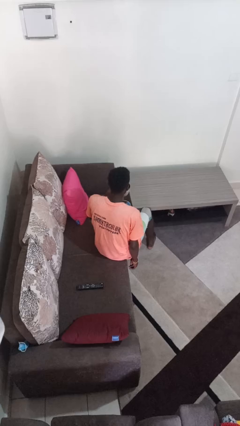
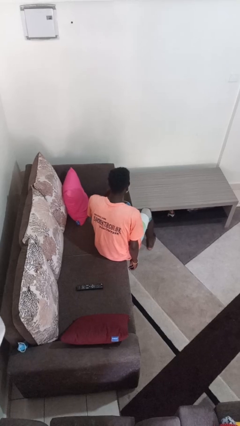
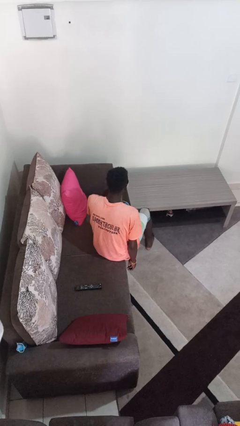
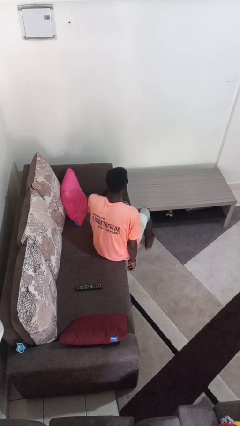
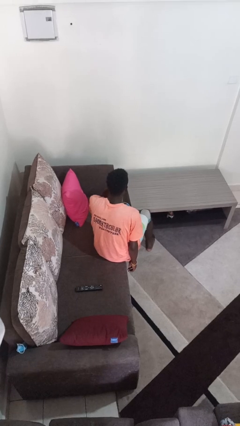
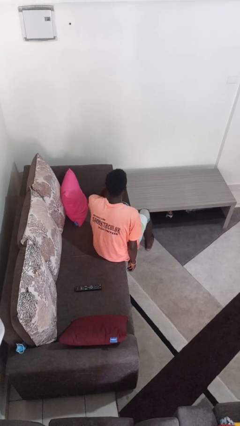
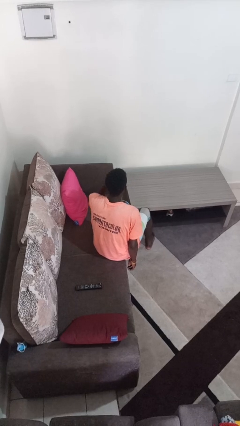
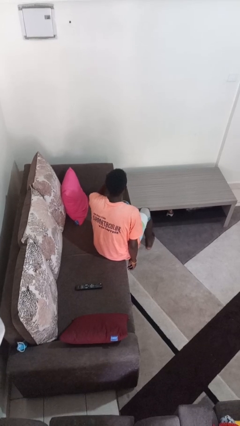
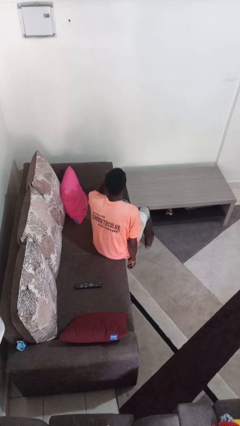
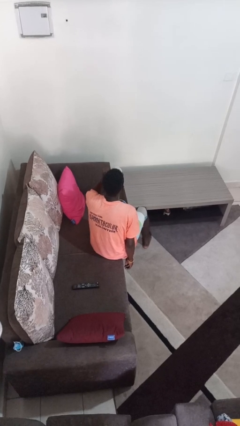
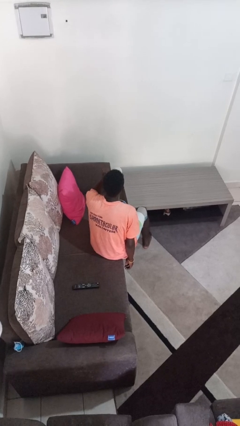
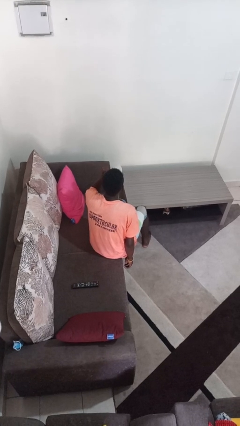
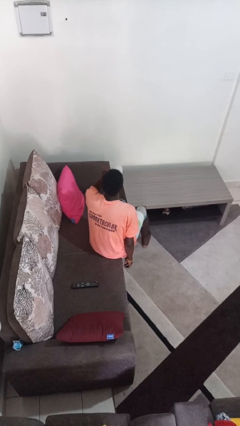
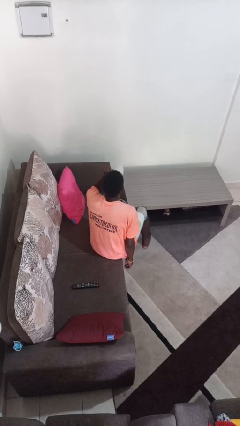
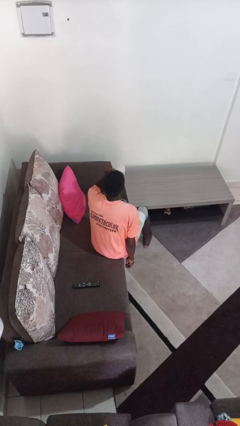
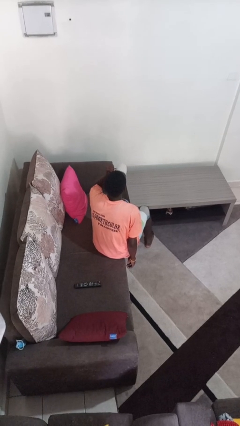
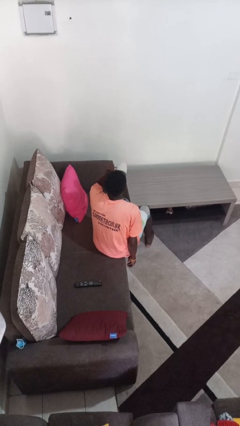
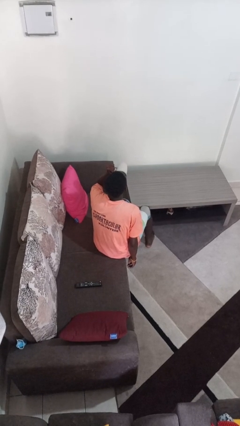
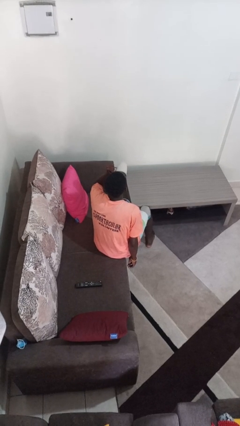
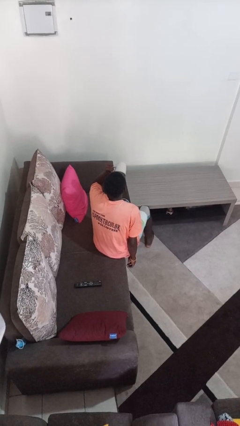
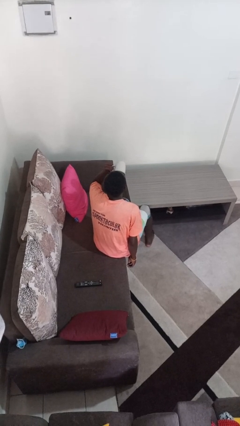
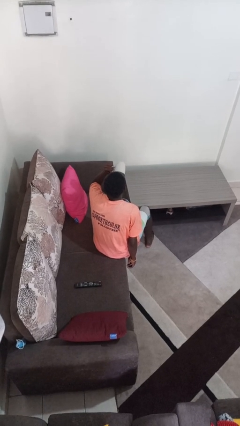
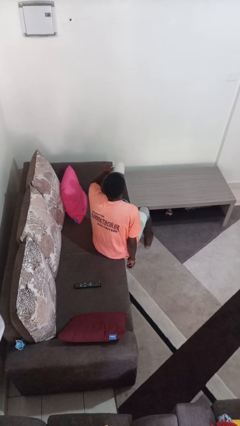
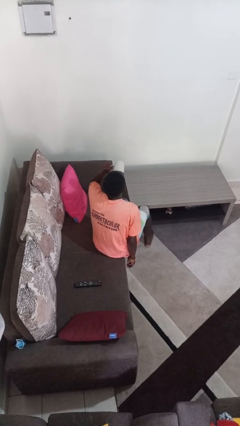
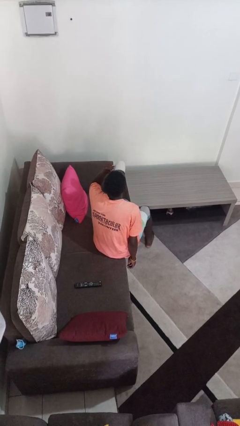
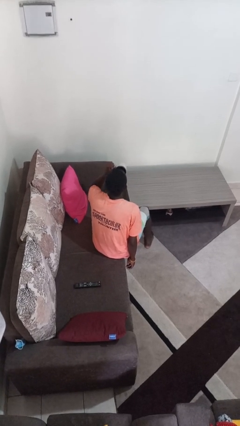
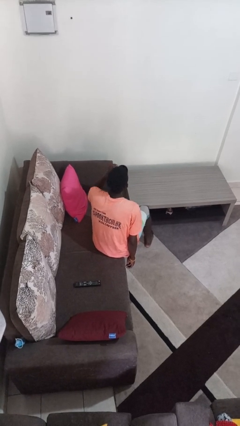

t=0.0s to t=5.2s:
person drinks from mug

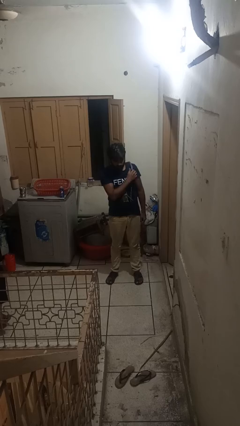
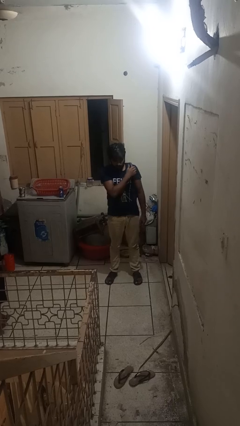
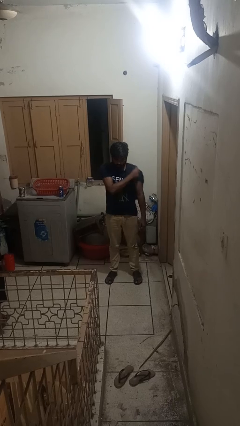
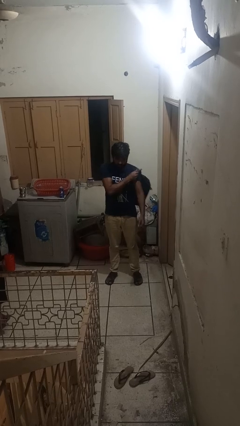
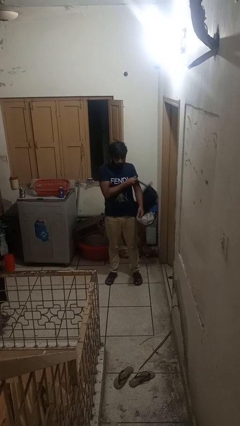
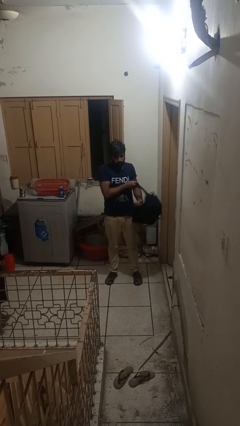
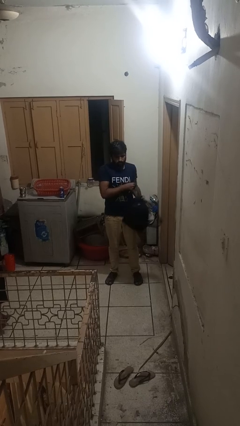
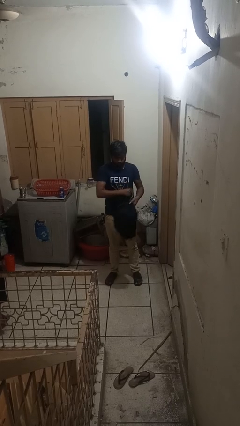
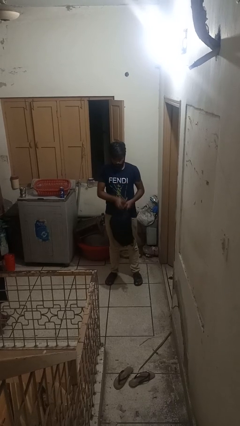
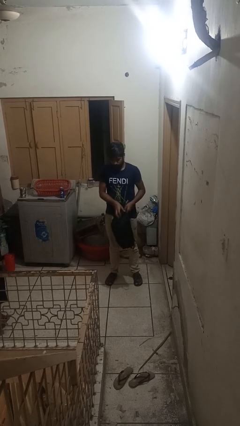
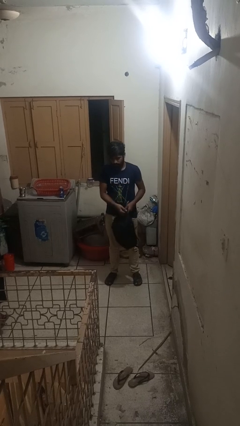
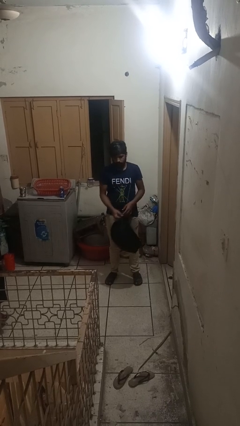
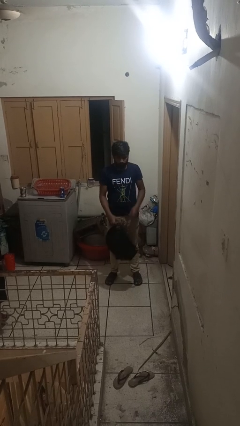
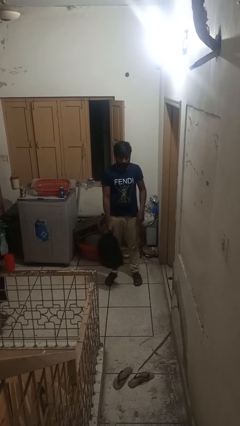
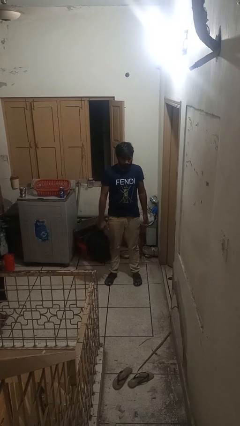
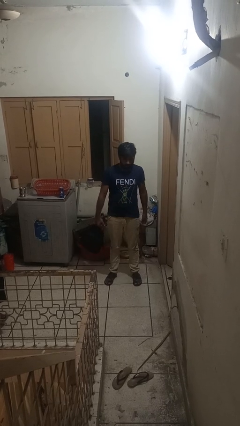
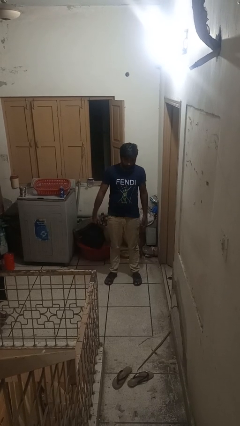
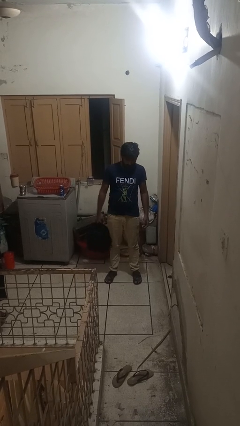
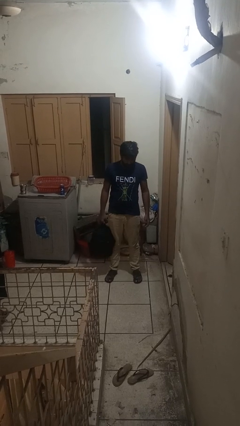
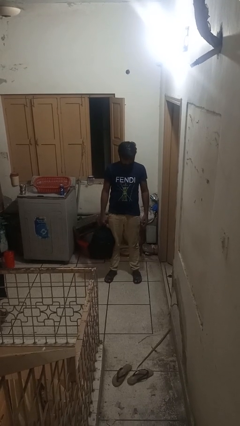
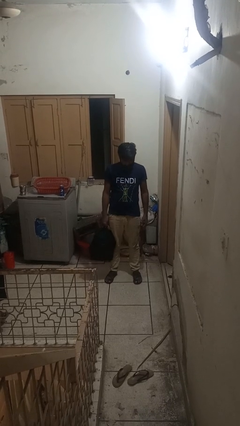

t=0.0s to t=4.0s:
person takes off backpack

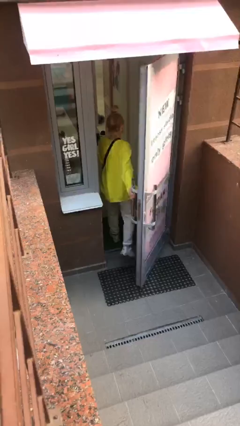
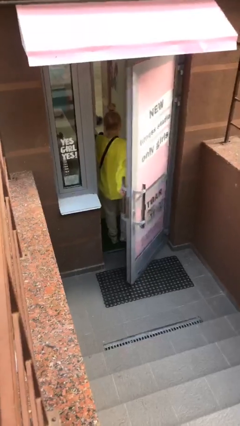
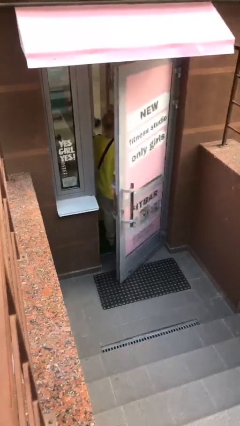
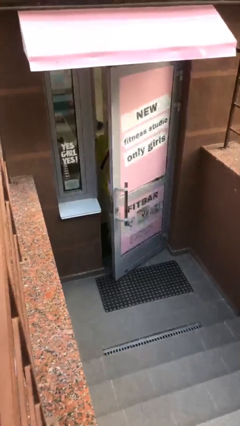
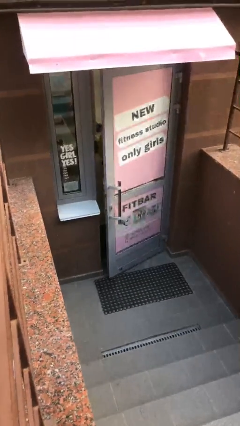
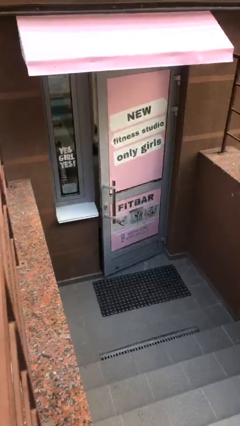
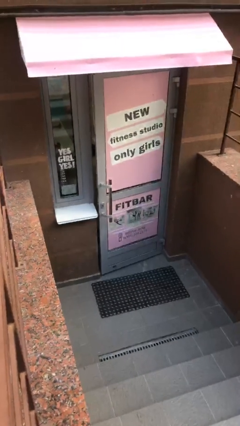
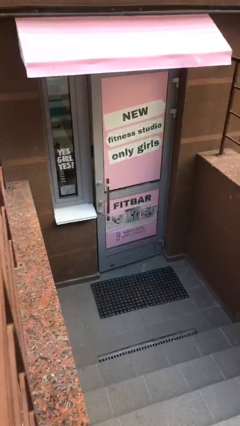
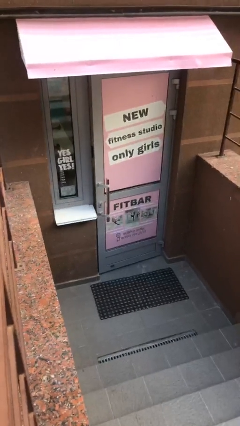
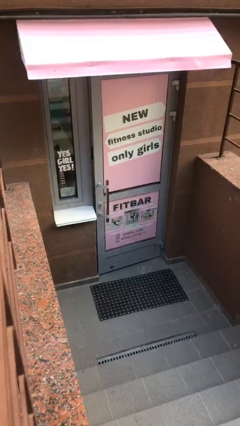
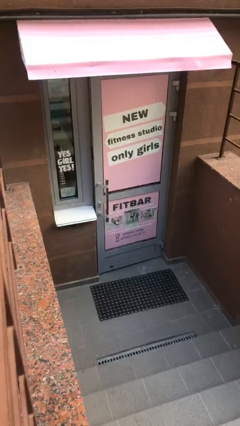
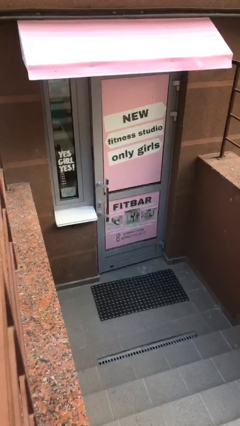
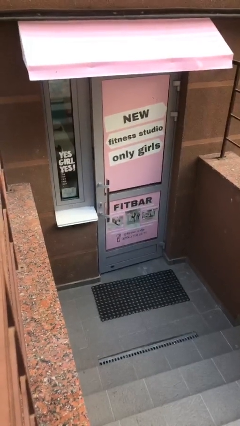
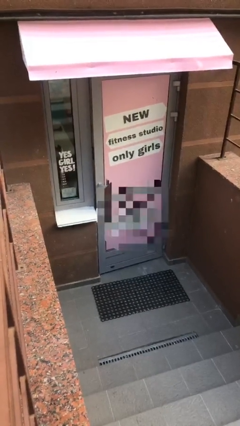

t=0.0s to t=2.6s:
person closes facility door

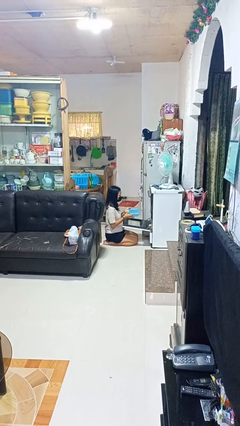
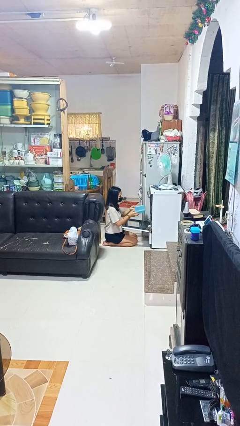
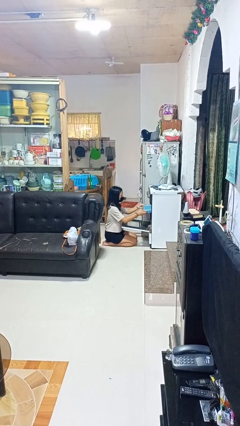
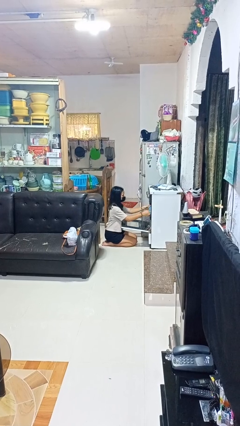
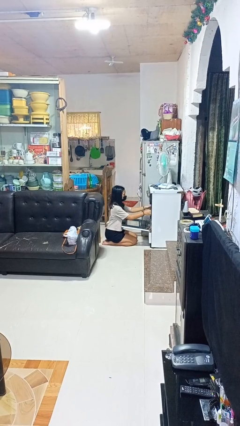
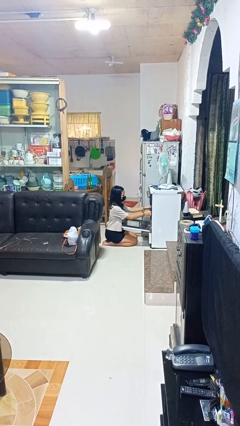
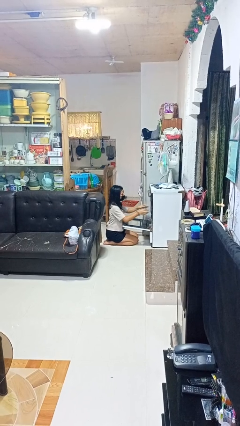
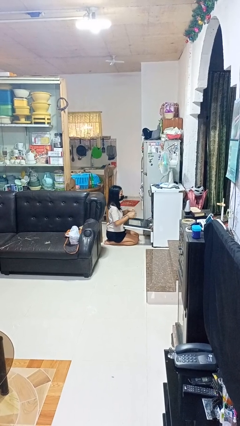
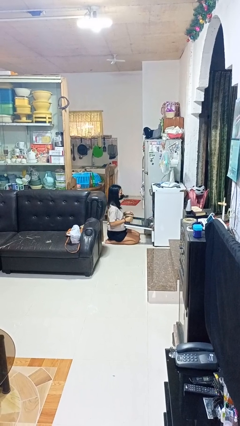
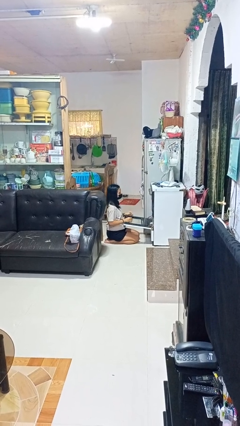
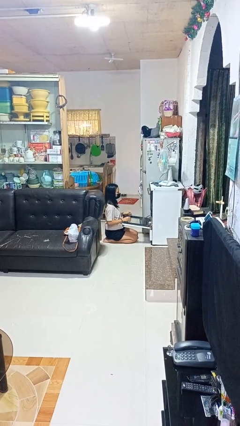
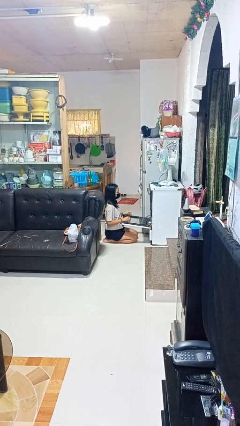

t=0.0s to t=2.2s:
person puts object into oven

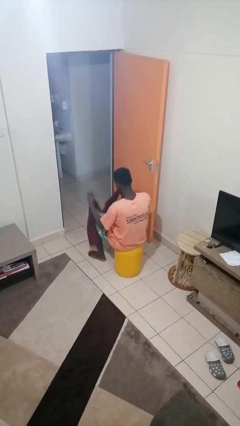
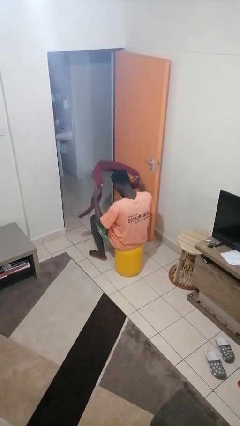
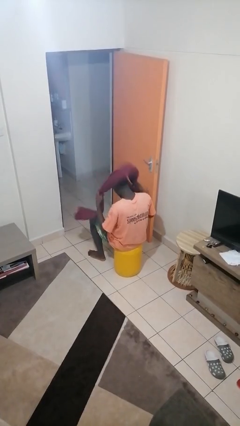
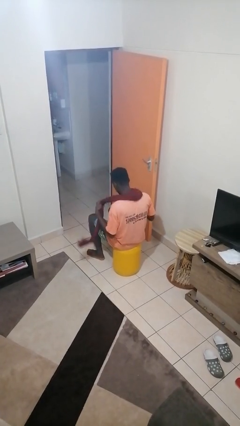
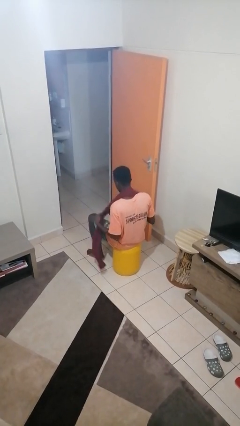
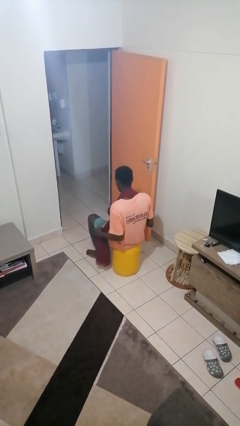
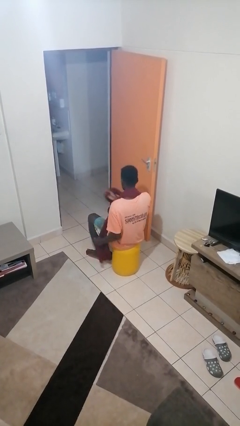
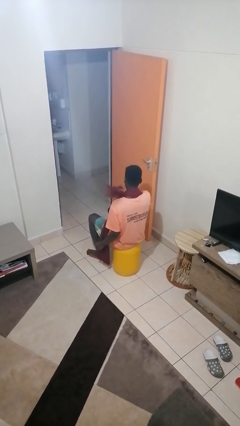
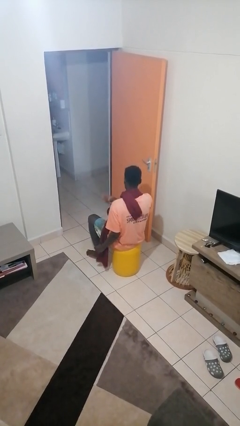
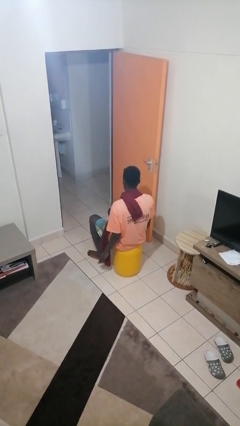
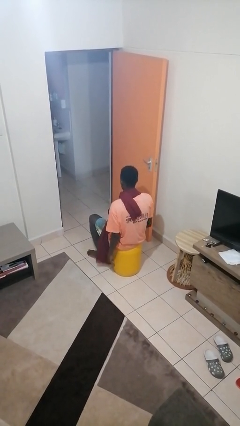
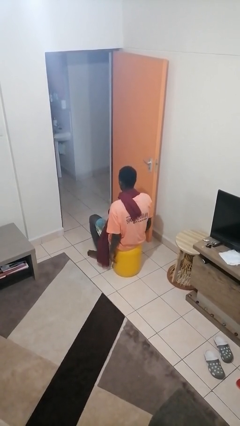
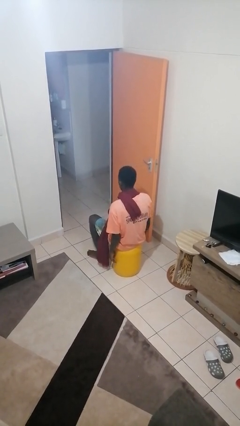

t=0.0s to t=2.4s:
person puts on scarf

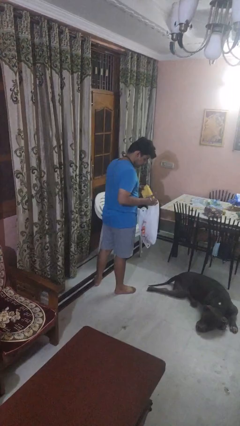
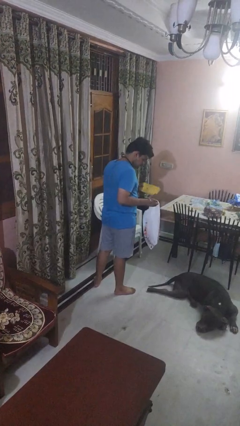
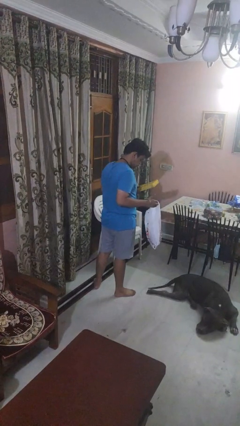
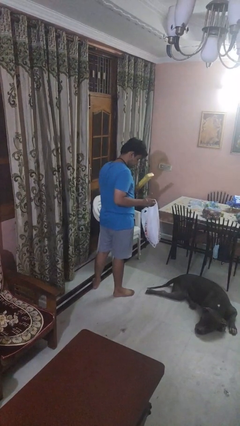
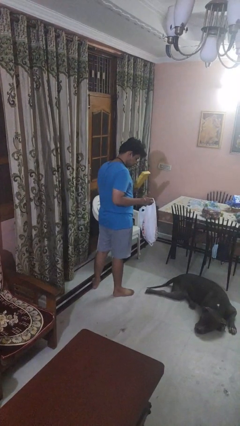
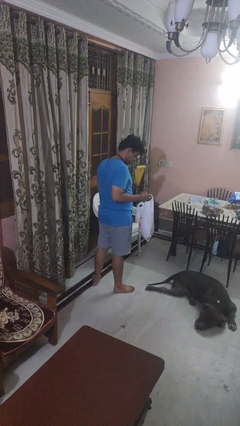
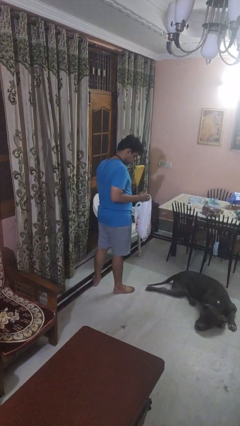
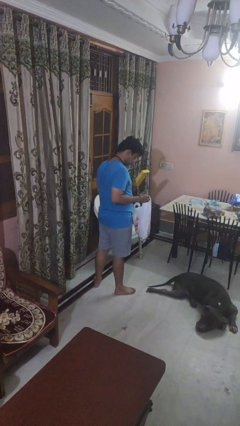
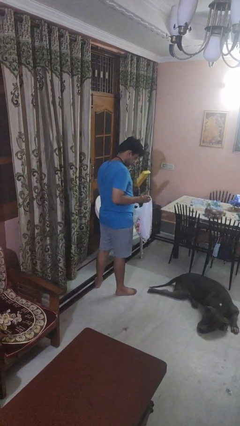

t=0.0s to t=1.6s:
person takes object from bag
